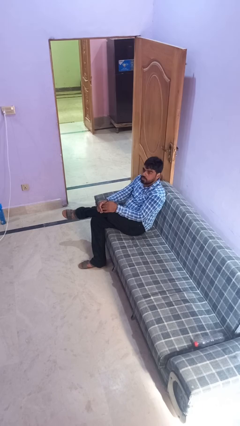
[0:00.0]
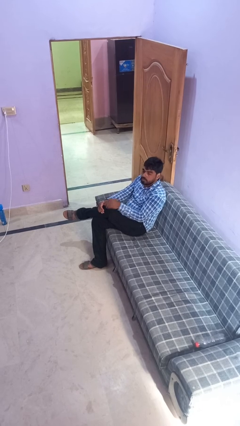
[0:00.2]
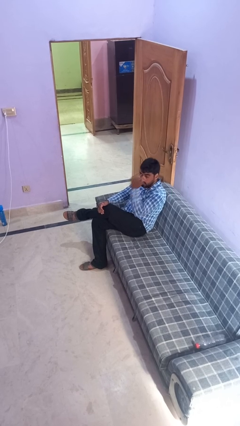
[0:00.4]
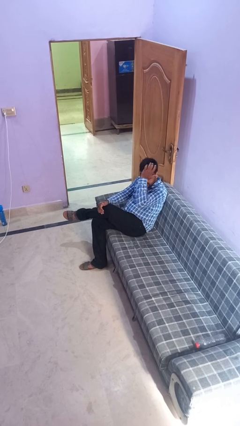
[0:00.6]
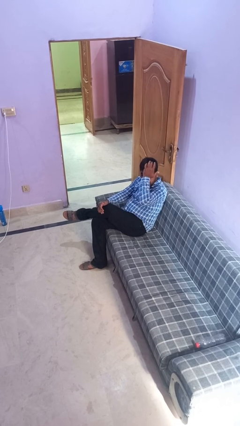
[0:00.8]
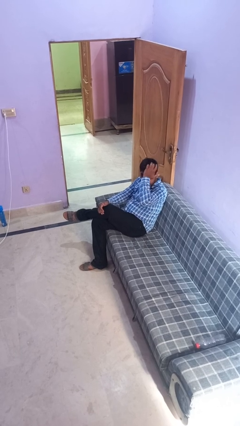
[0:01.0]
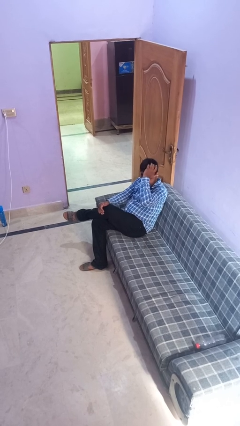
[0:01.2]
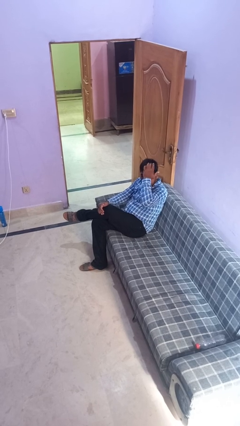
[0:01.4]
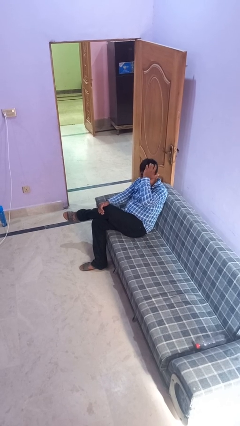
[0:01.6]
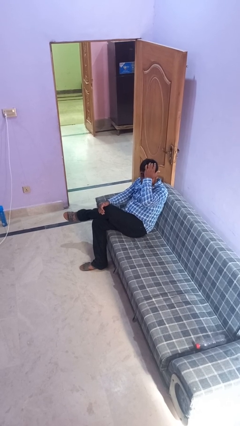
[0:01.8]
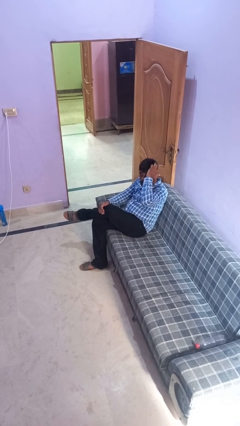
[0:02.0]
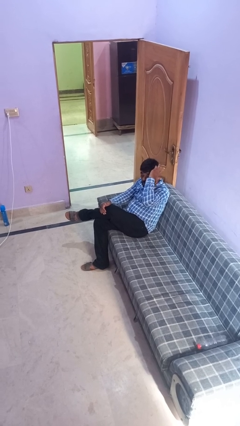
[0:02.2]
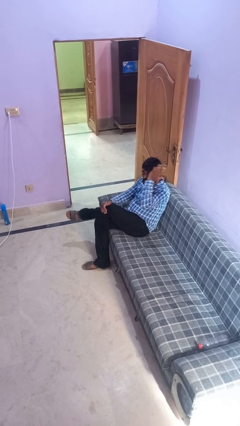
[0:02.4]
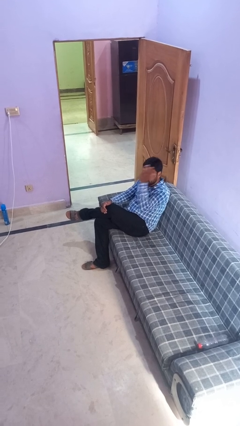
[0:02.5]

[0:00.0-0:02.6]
person rubs eyes

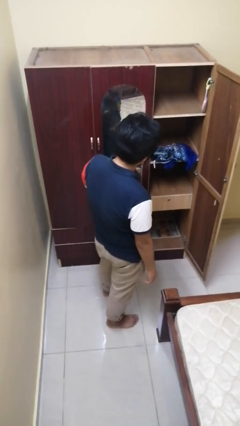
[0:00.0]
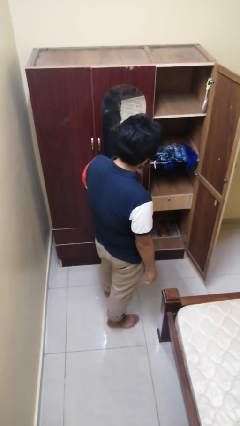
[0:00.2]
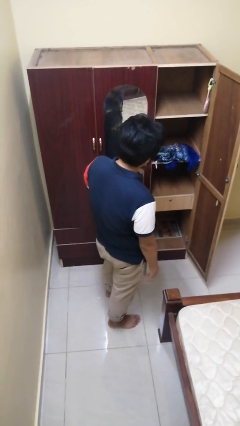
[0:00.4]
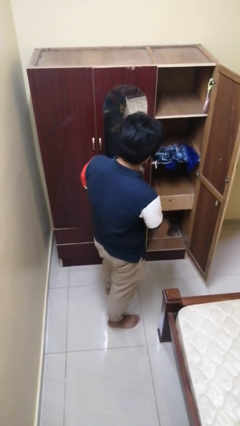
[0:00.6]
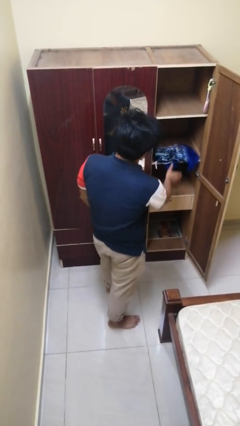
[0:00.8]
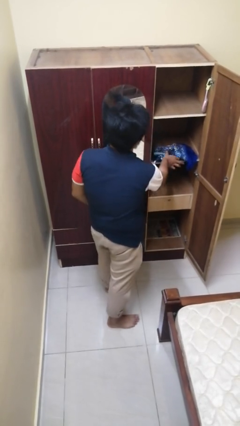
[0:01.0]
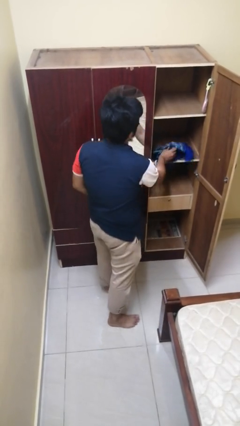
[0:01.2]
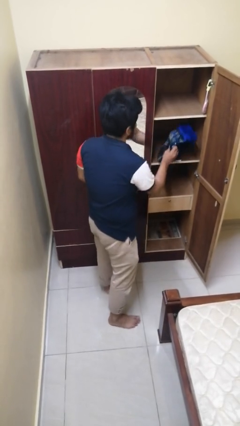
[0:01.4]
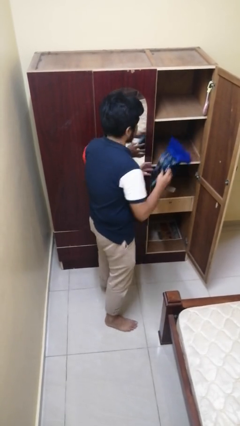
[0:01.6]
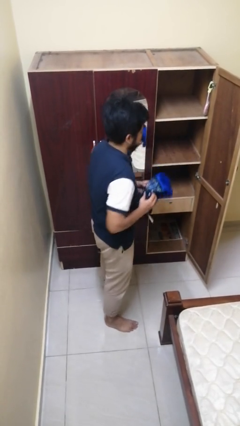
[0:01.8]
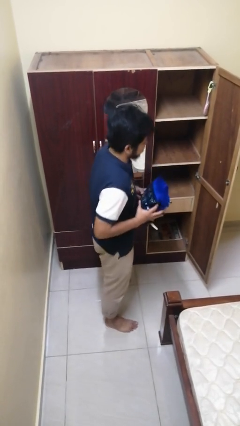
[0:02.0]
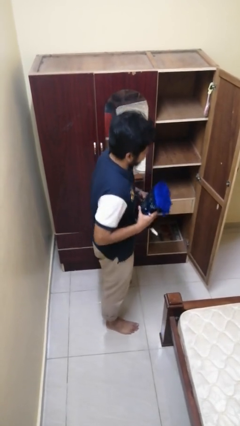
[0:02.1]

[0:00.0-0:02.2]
person picks up object from cabinet

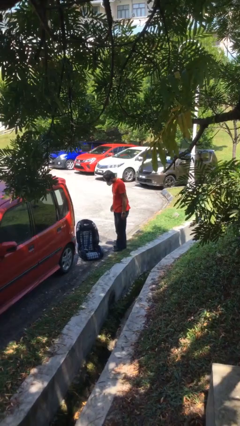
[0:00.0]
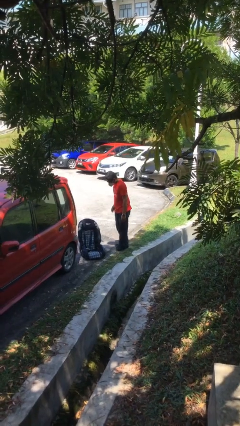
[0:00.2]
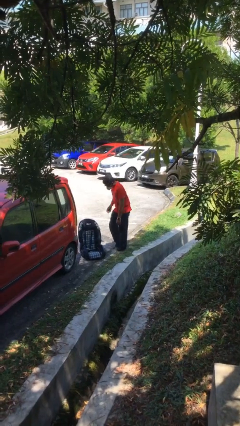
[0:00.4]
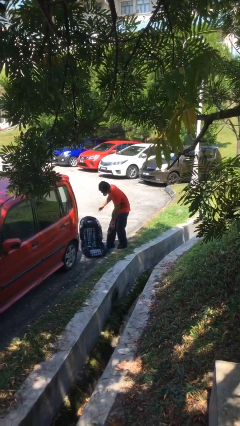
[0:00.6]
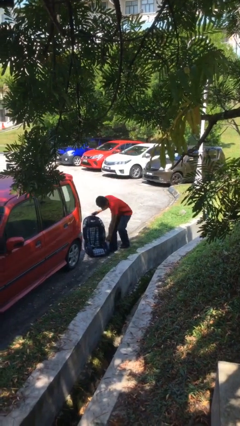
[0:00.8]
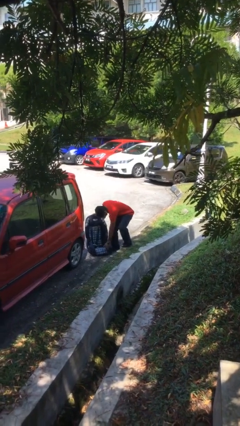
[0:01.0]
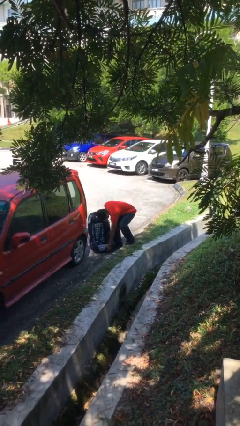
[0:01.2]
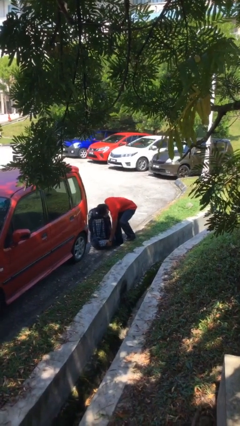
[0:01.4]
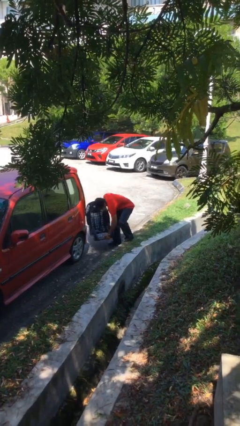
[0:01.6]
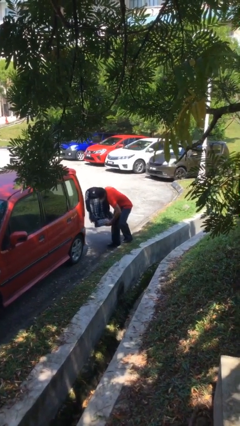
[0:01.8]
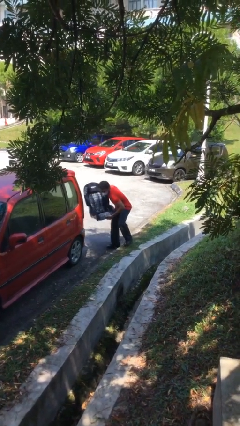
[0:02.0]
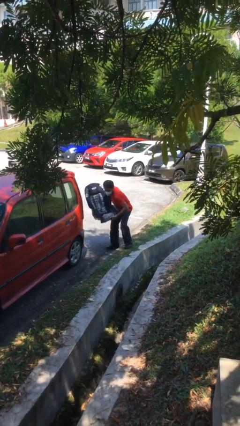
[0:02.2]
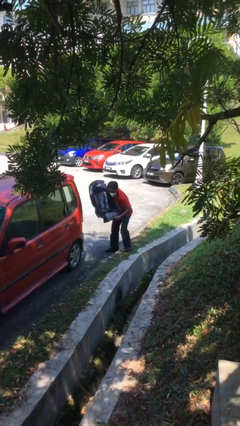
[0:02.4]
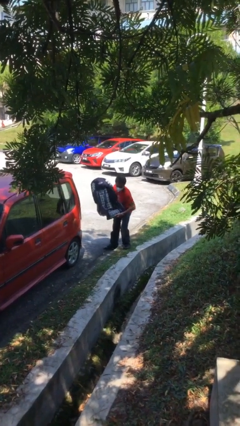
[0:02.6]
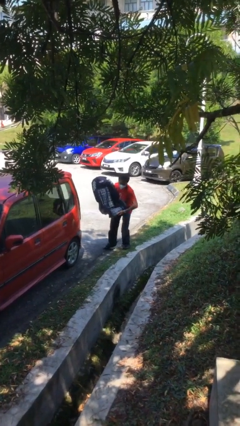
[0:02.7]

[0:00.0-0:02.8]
person picks up object from floor

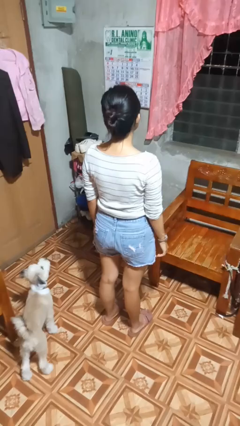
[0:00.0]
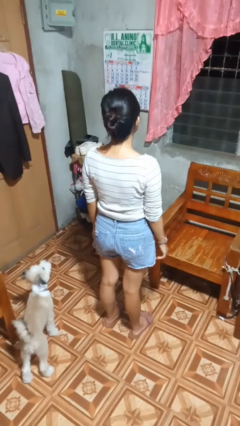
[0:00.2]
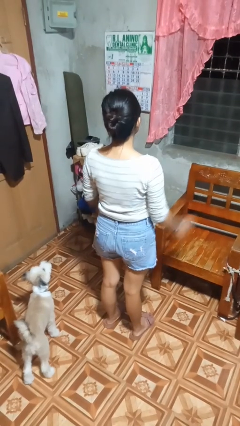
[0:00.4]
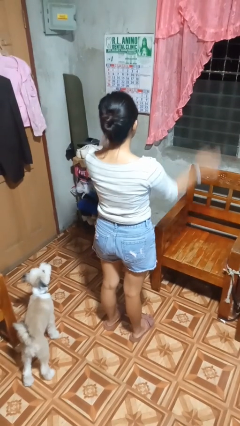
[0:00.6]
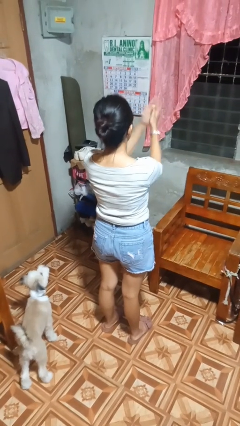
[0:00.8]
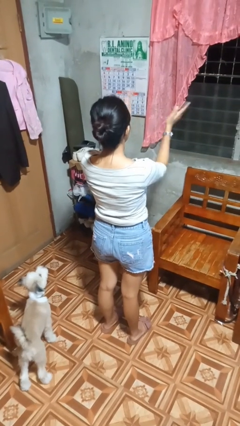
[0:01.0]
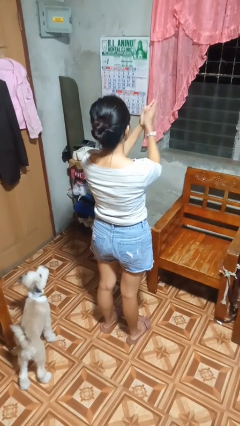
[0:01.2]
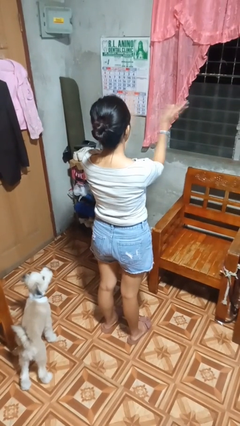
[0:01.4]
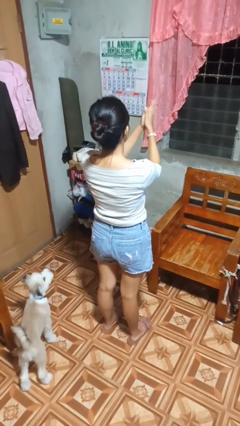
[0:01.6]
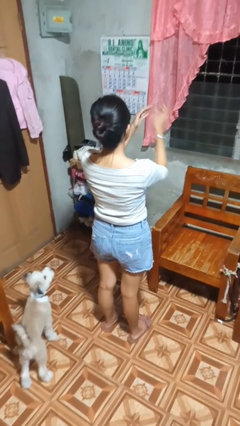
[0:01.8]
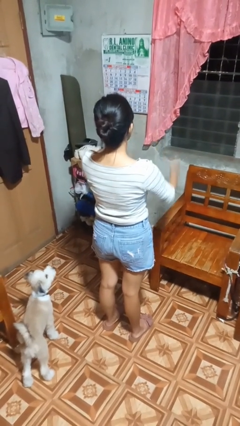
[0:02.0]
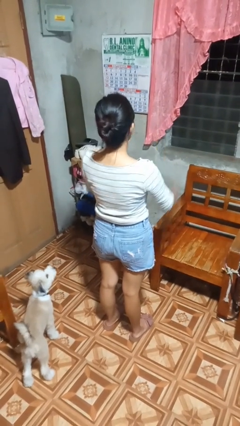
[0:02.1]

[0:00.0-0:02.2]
person claps hands

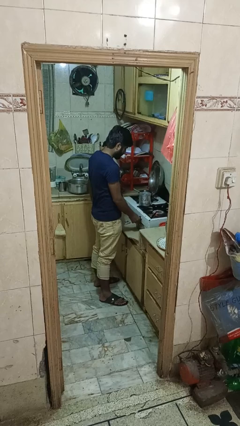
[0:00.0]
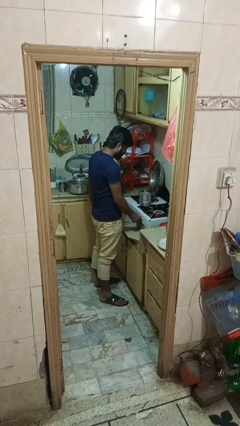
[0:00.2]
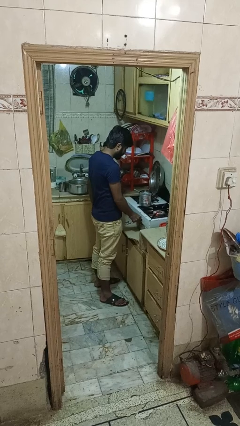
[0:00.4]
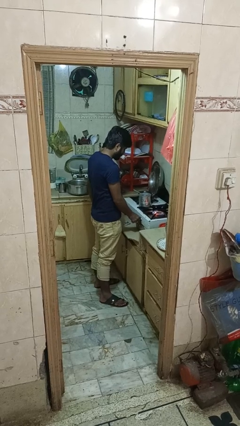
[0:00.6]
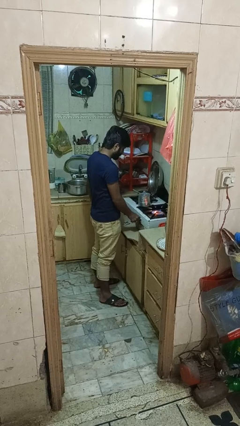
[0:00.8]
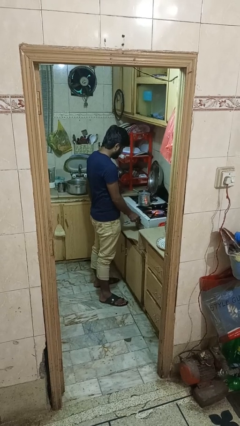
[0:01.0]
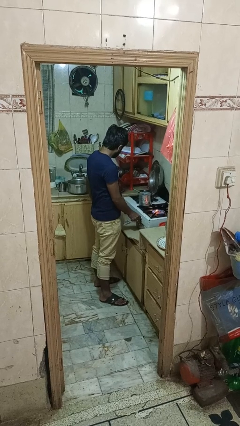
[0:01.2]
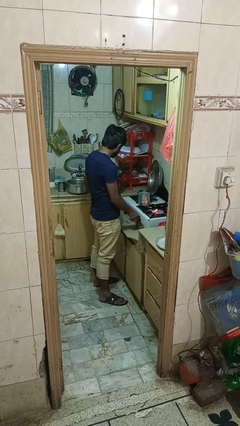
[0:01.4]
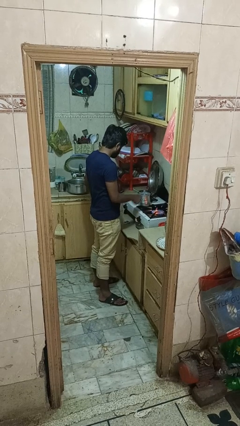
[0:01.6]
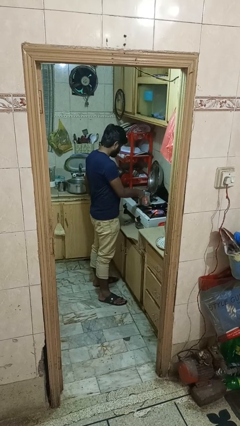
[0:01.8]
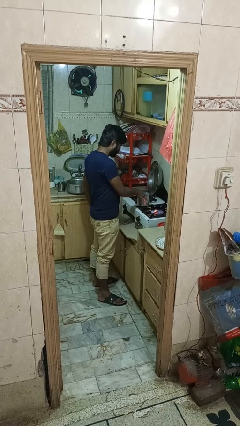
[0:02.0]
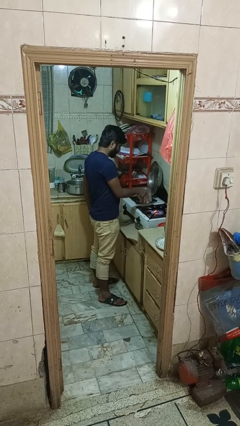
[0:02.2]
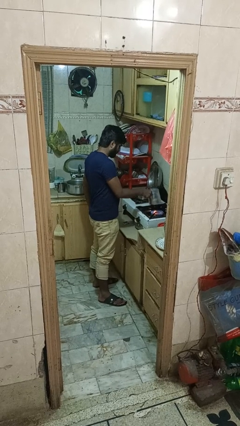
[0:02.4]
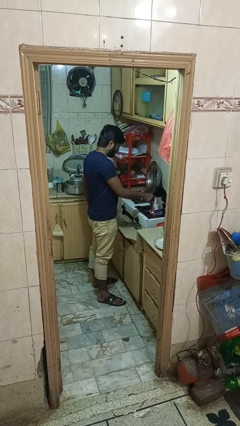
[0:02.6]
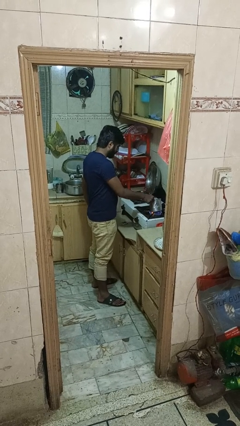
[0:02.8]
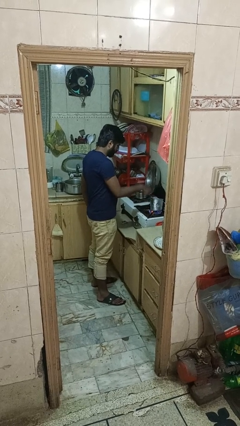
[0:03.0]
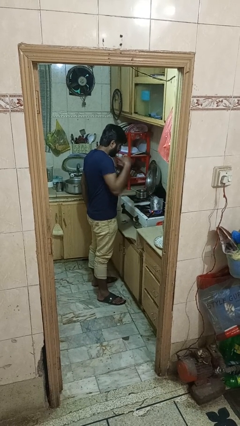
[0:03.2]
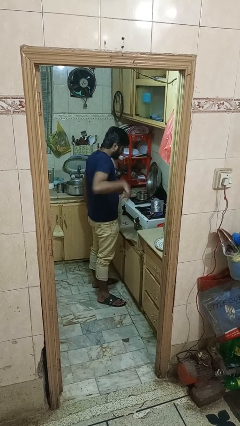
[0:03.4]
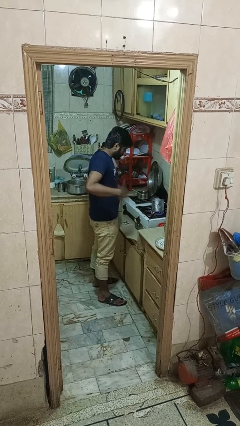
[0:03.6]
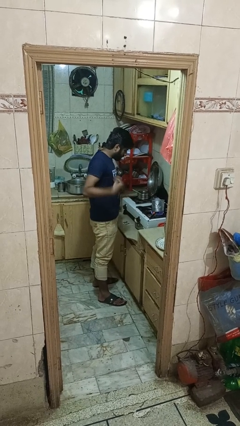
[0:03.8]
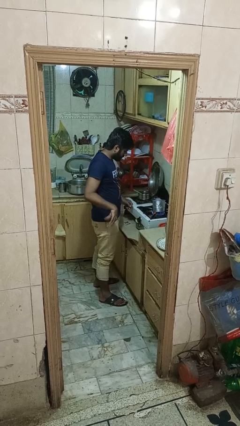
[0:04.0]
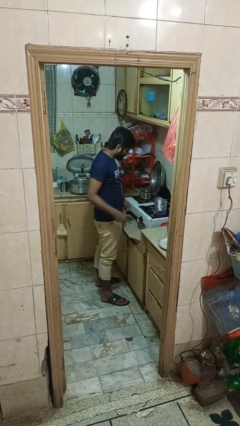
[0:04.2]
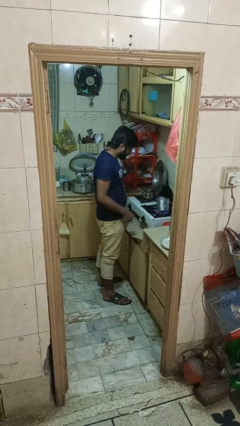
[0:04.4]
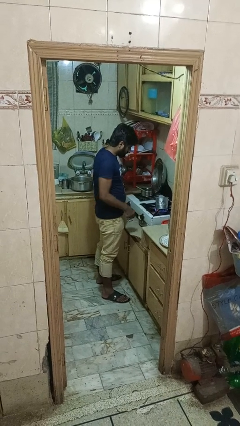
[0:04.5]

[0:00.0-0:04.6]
person burns hand

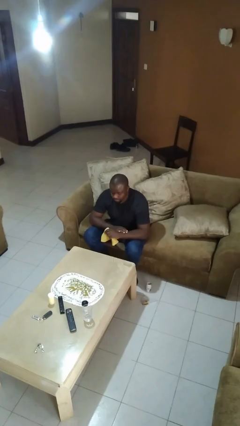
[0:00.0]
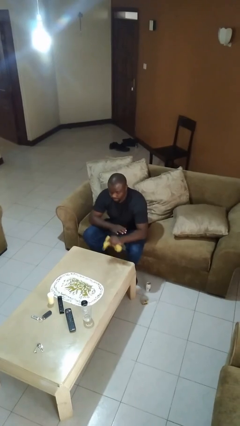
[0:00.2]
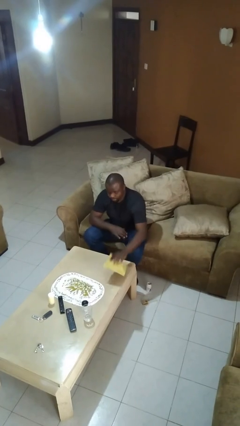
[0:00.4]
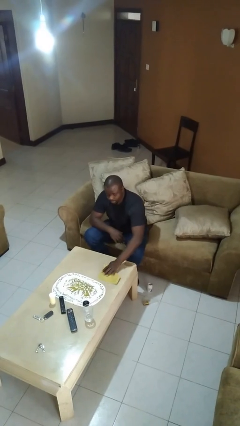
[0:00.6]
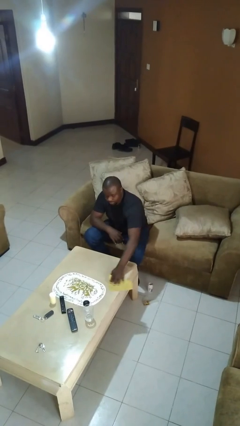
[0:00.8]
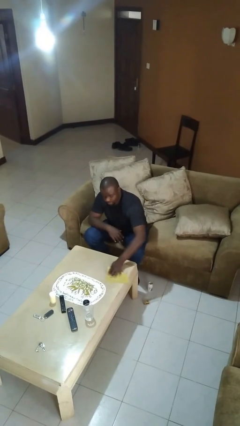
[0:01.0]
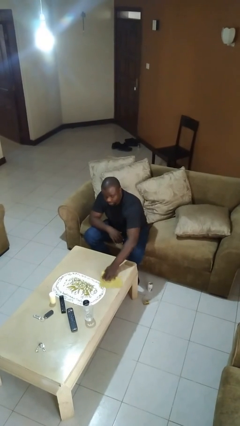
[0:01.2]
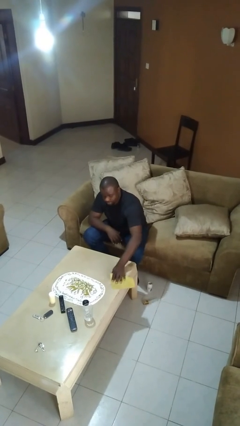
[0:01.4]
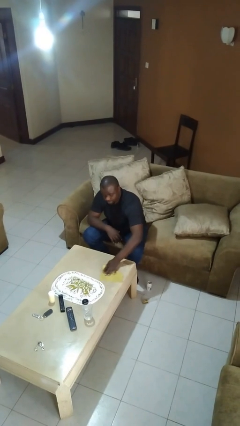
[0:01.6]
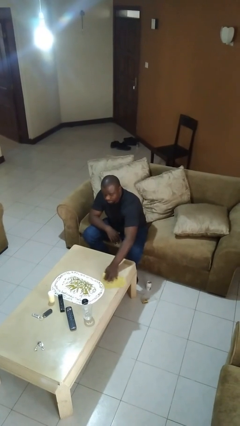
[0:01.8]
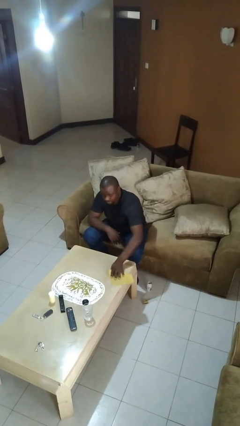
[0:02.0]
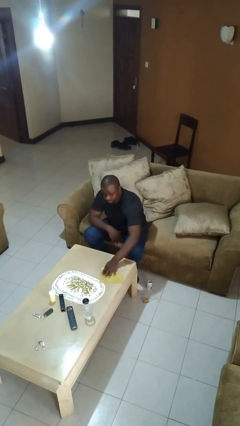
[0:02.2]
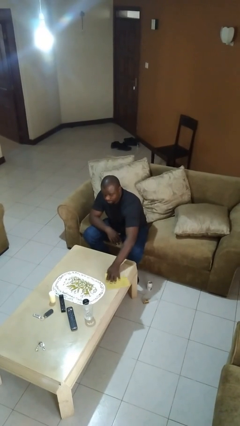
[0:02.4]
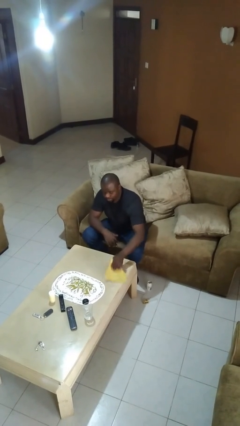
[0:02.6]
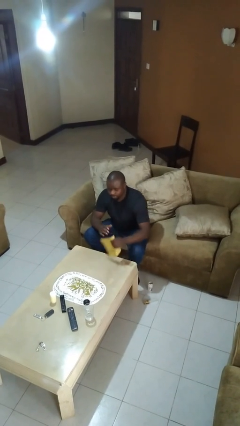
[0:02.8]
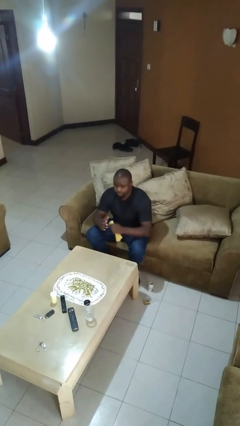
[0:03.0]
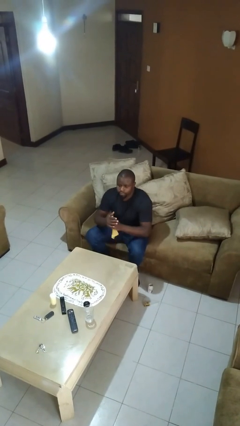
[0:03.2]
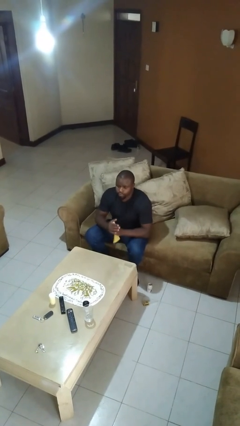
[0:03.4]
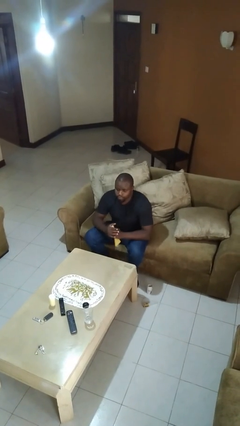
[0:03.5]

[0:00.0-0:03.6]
person cleans table with rag
